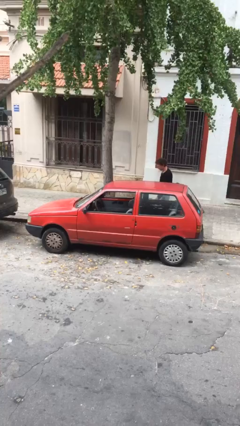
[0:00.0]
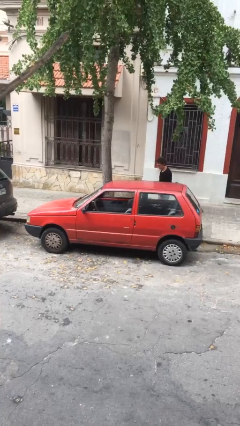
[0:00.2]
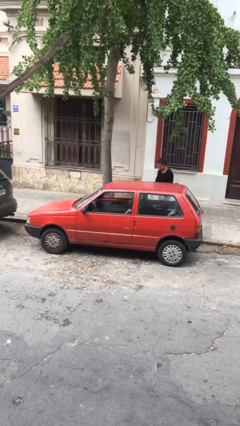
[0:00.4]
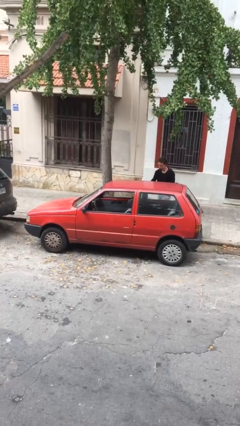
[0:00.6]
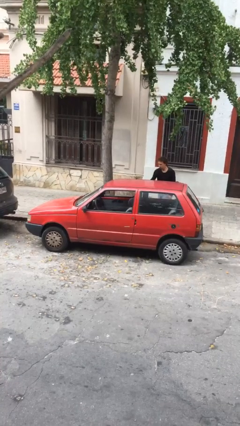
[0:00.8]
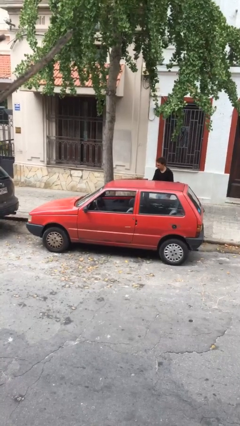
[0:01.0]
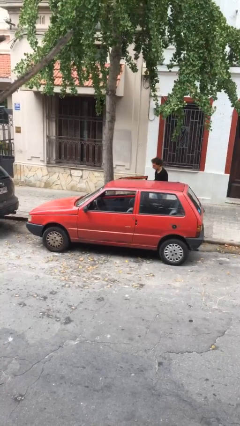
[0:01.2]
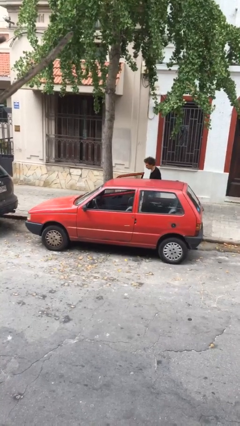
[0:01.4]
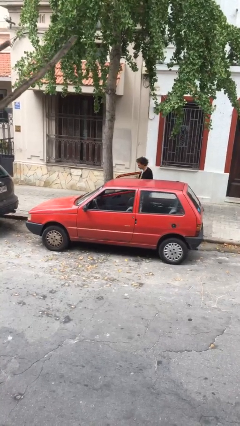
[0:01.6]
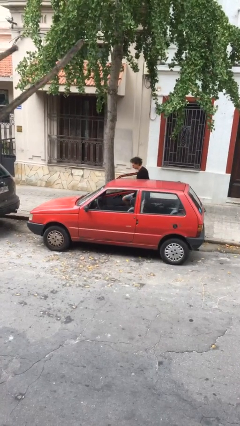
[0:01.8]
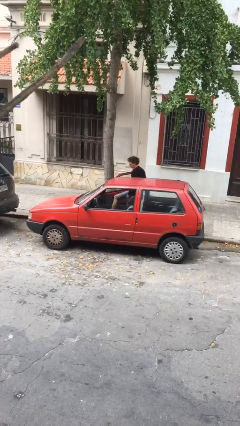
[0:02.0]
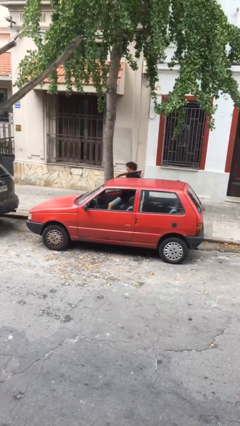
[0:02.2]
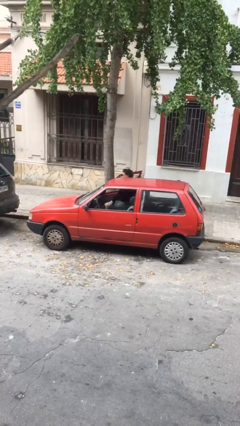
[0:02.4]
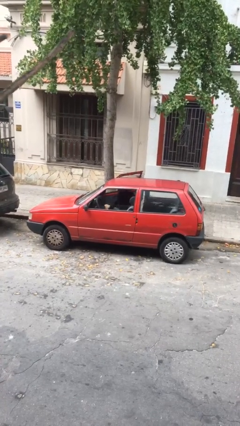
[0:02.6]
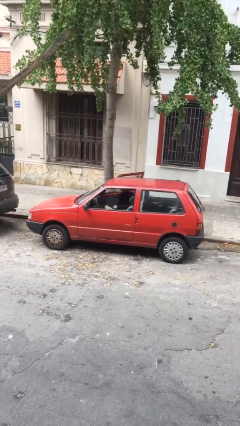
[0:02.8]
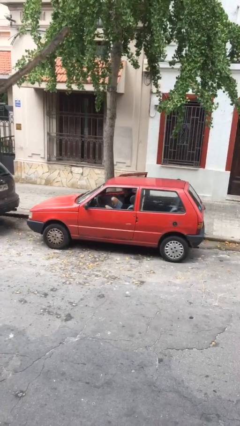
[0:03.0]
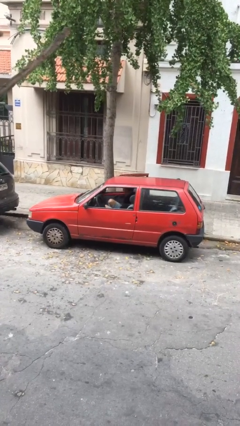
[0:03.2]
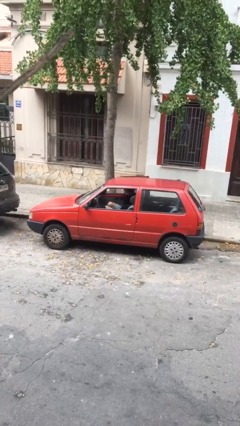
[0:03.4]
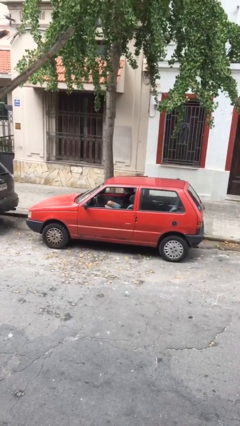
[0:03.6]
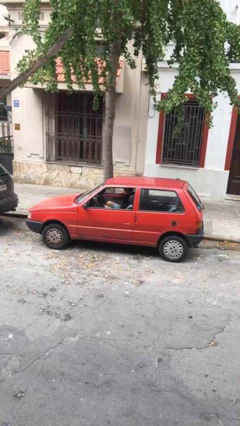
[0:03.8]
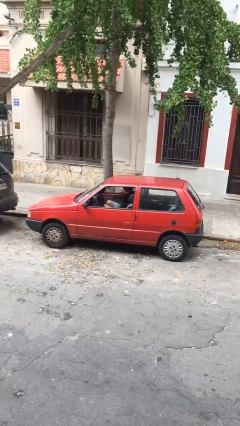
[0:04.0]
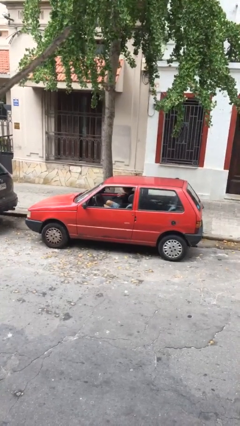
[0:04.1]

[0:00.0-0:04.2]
car picks up person

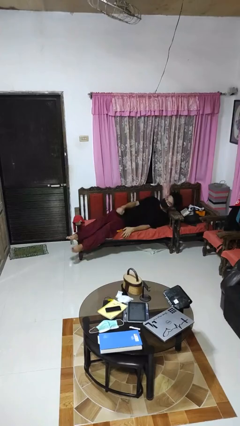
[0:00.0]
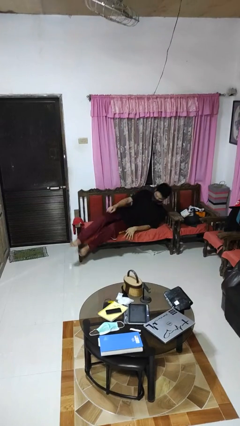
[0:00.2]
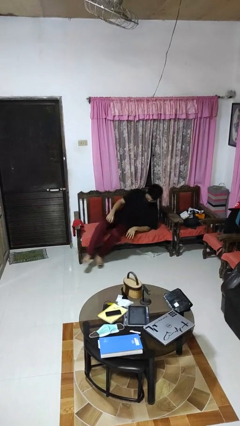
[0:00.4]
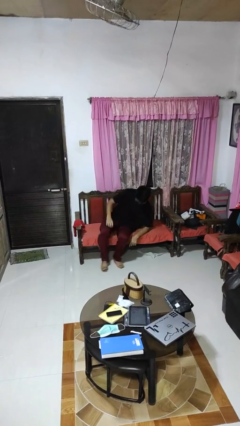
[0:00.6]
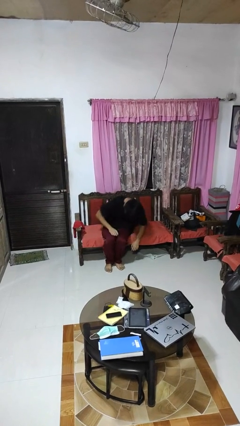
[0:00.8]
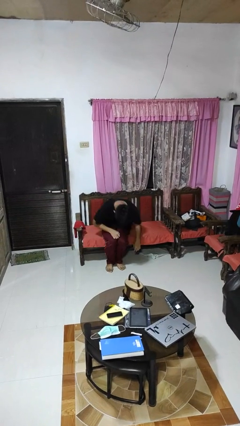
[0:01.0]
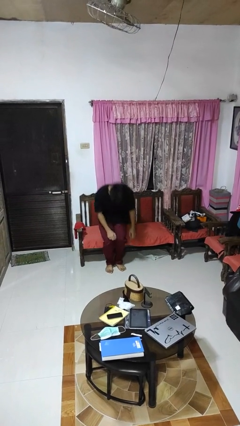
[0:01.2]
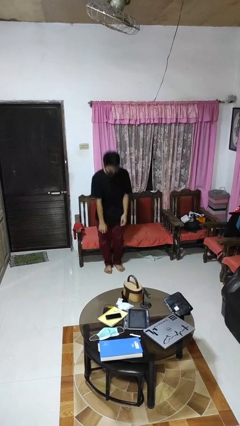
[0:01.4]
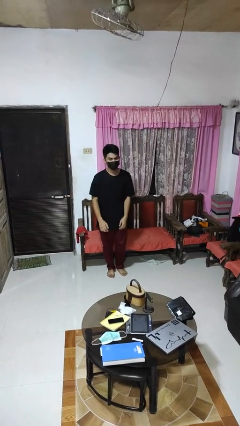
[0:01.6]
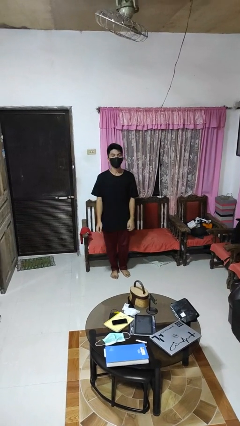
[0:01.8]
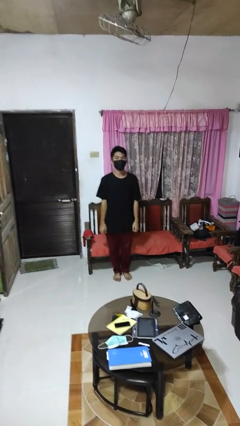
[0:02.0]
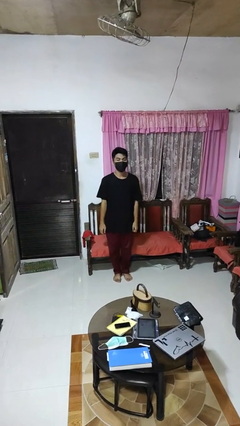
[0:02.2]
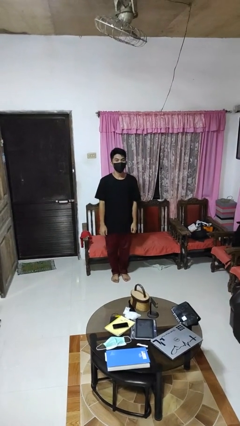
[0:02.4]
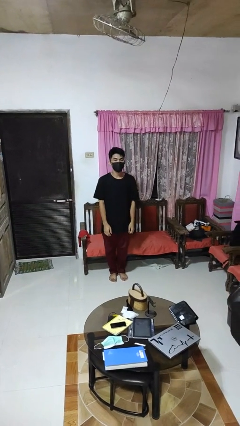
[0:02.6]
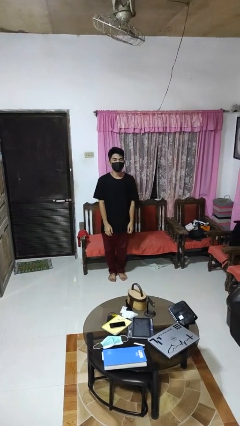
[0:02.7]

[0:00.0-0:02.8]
person stands up

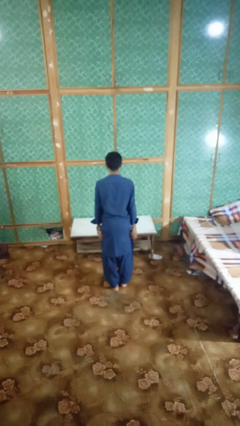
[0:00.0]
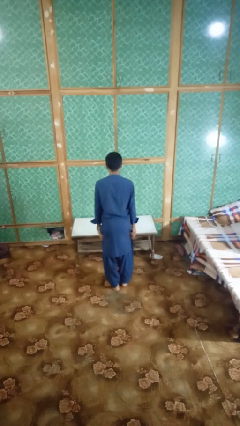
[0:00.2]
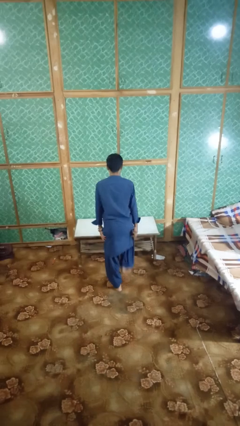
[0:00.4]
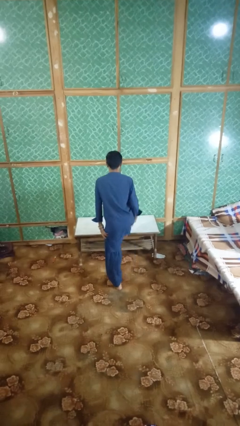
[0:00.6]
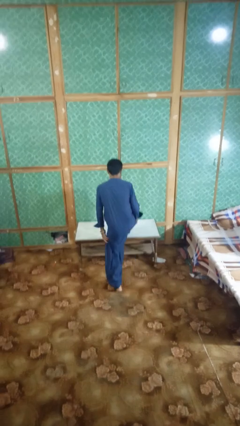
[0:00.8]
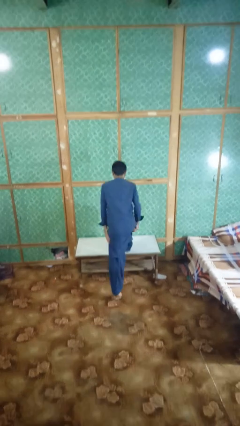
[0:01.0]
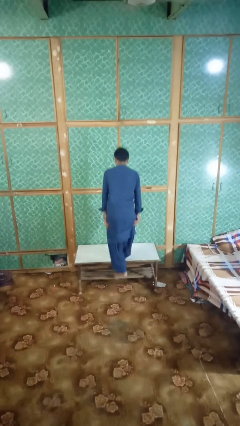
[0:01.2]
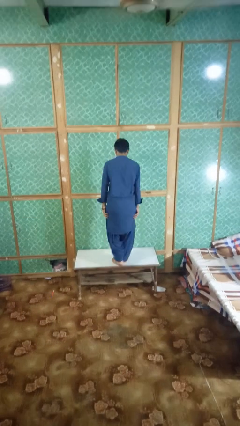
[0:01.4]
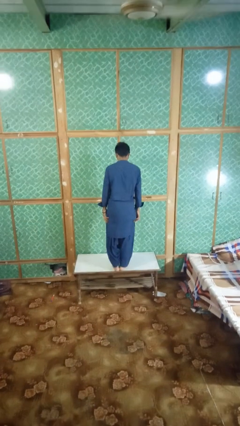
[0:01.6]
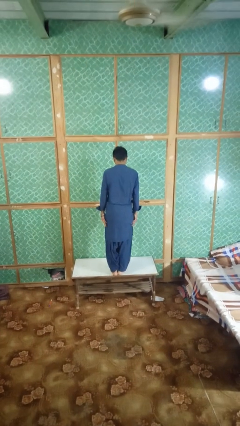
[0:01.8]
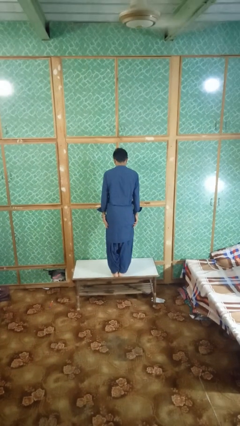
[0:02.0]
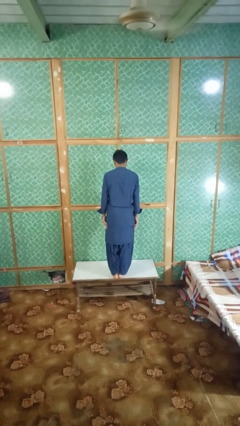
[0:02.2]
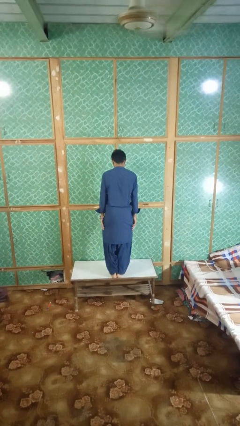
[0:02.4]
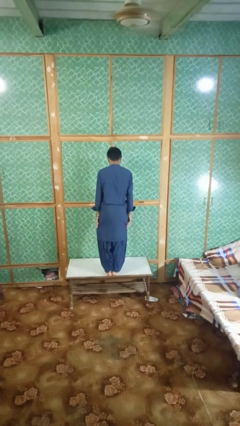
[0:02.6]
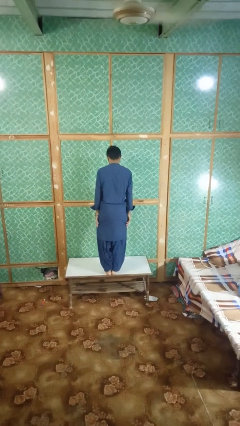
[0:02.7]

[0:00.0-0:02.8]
person climbs on table

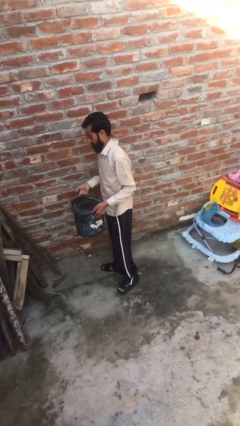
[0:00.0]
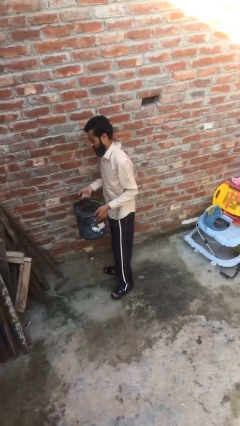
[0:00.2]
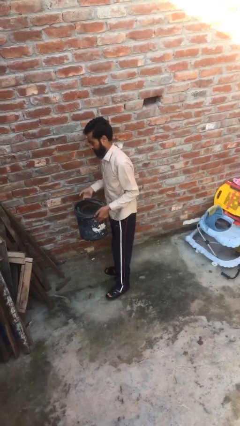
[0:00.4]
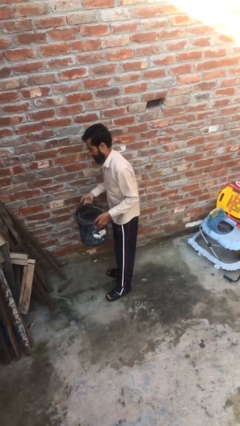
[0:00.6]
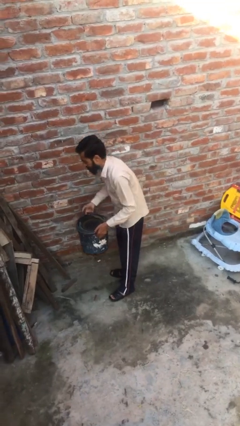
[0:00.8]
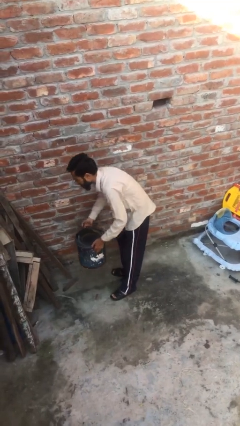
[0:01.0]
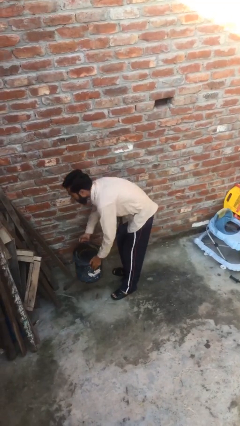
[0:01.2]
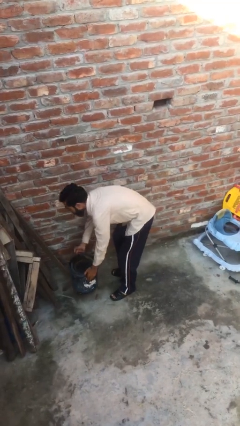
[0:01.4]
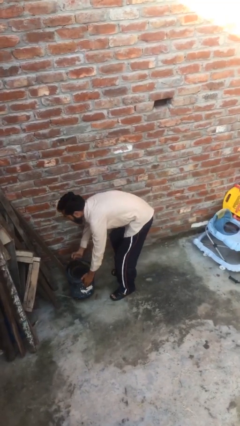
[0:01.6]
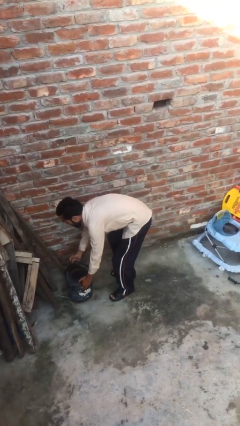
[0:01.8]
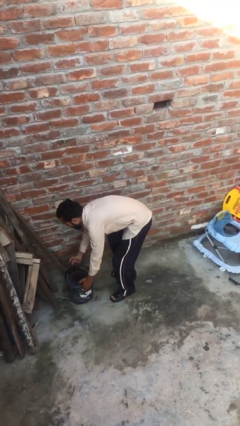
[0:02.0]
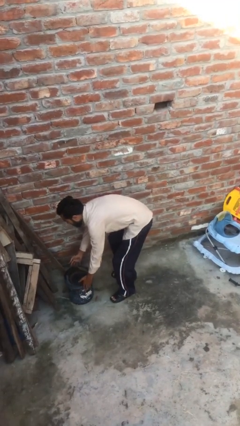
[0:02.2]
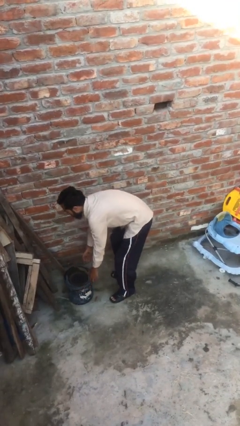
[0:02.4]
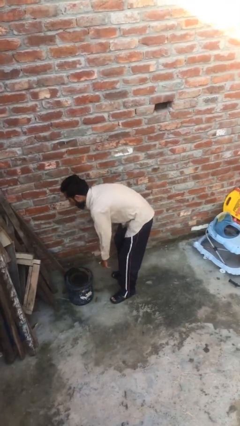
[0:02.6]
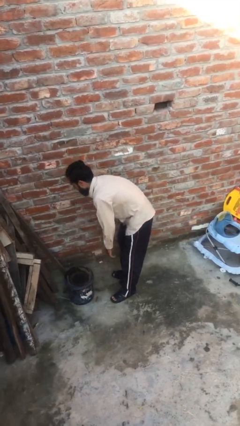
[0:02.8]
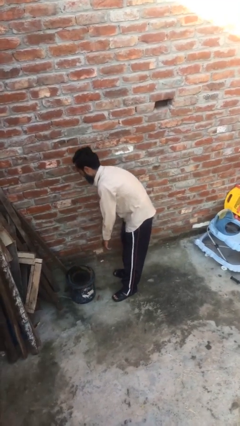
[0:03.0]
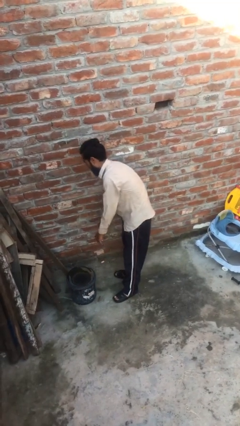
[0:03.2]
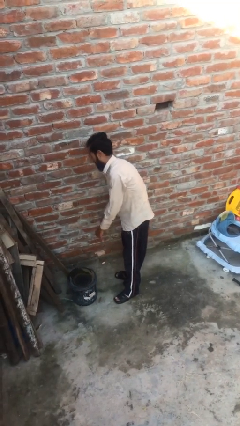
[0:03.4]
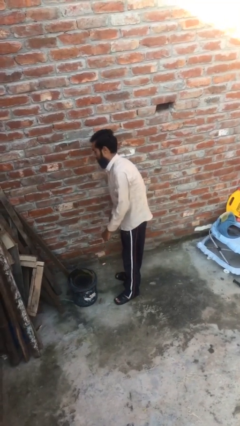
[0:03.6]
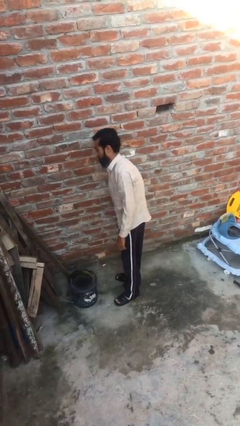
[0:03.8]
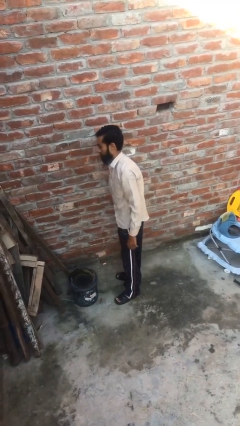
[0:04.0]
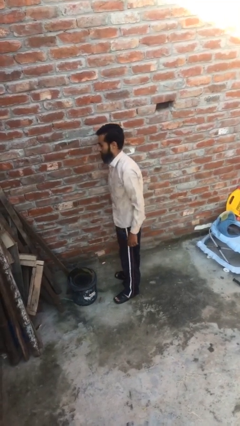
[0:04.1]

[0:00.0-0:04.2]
person puts down object on floor

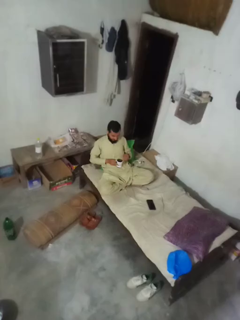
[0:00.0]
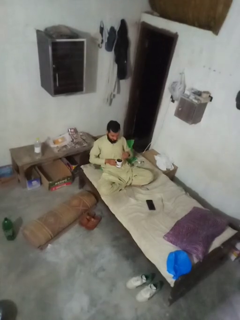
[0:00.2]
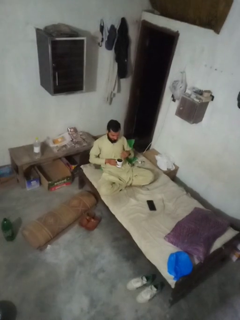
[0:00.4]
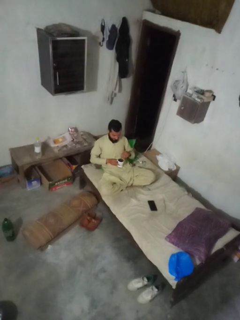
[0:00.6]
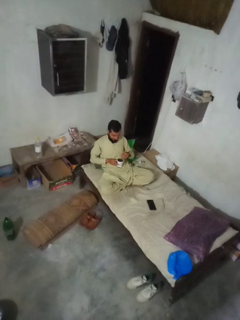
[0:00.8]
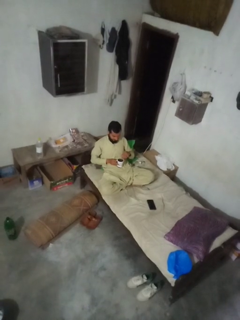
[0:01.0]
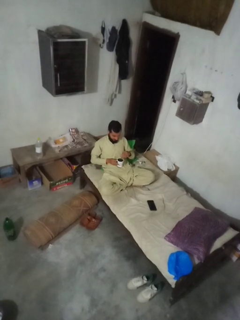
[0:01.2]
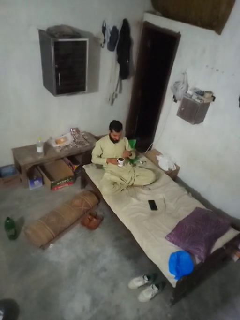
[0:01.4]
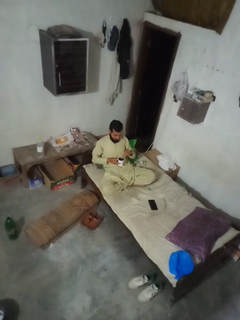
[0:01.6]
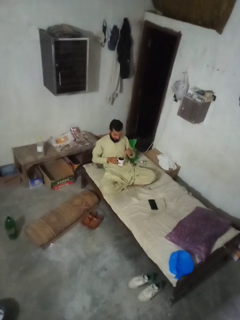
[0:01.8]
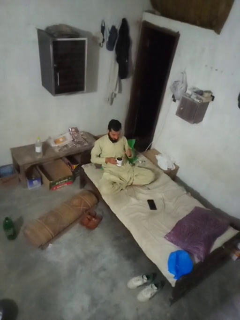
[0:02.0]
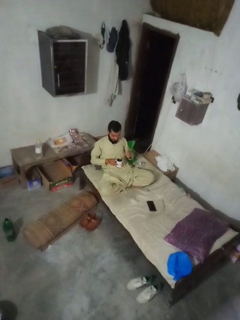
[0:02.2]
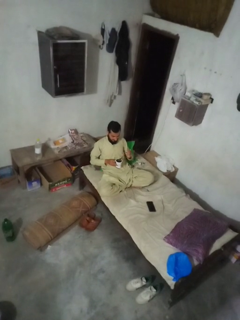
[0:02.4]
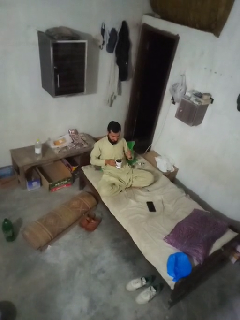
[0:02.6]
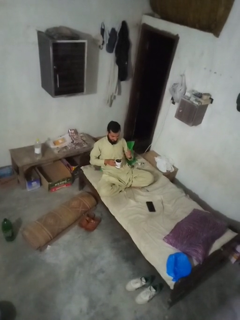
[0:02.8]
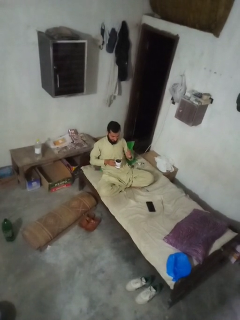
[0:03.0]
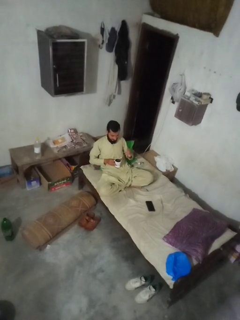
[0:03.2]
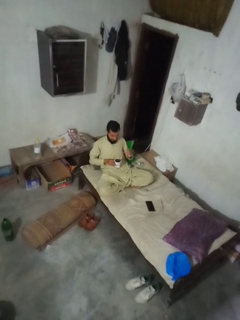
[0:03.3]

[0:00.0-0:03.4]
person stirs mug

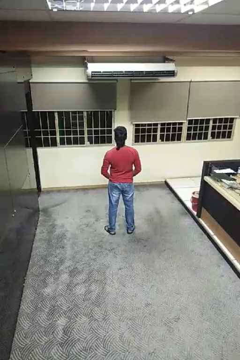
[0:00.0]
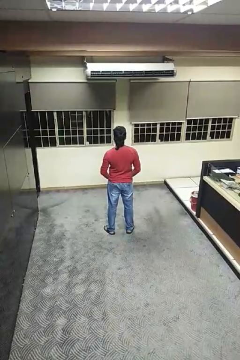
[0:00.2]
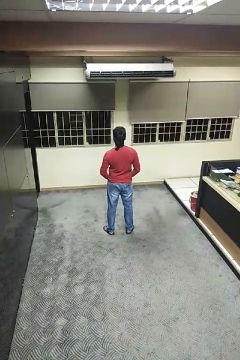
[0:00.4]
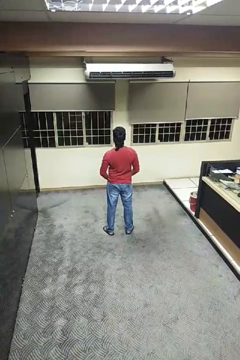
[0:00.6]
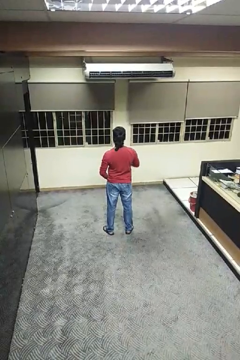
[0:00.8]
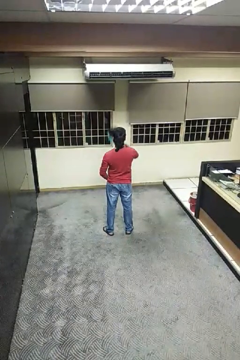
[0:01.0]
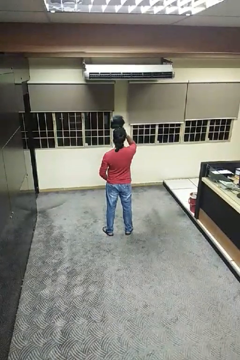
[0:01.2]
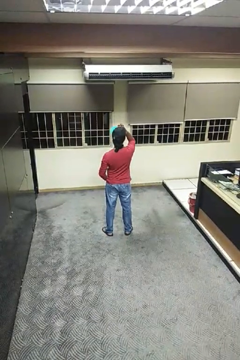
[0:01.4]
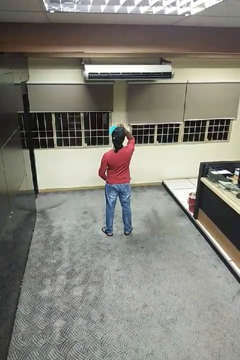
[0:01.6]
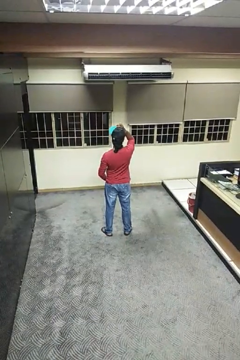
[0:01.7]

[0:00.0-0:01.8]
person puts on hat
